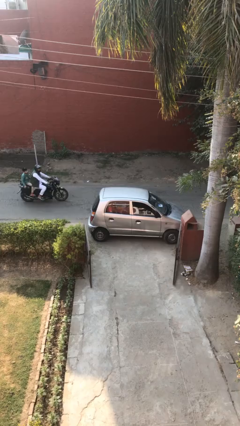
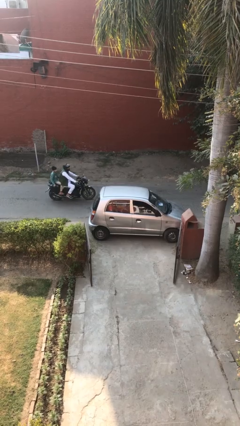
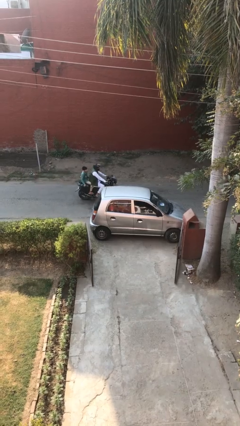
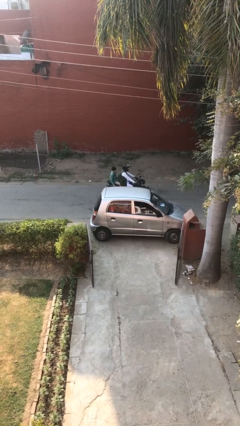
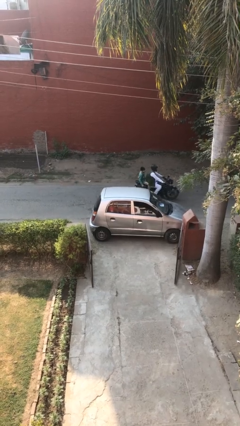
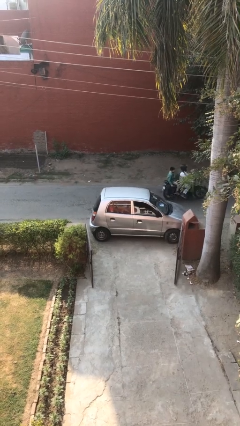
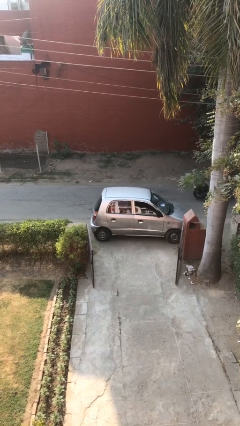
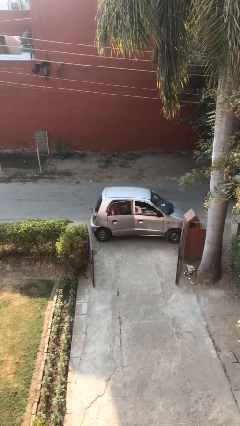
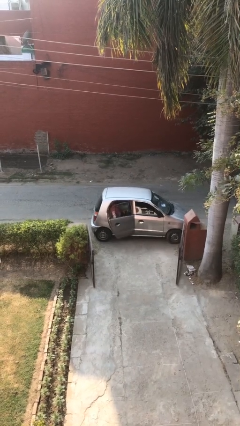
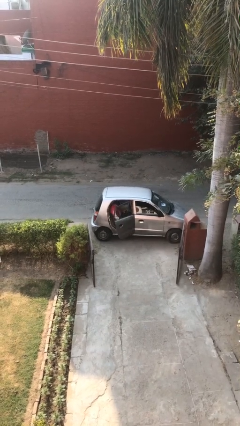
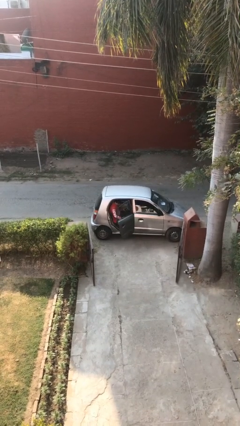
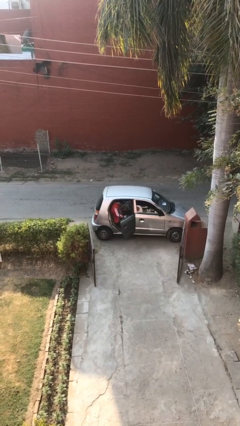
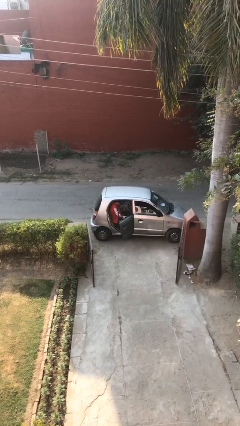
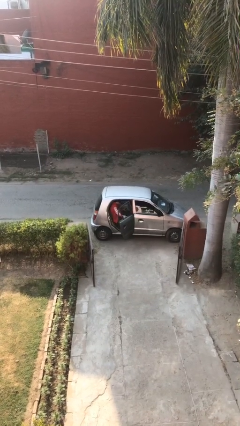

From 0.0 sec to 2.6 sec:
person opens car door

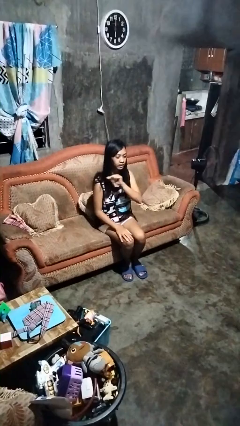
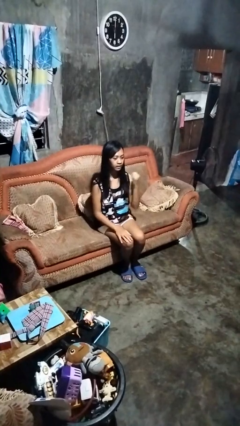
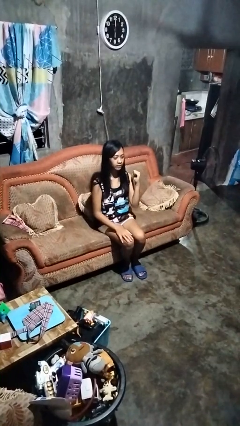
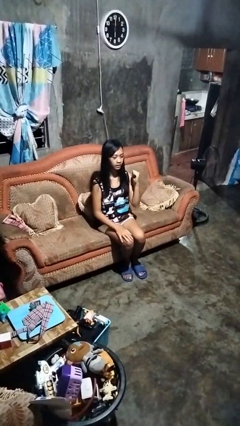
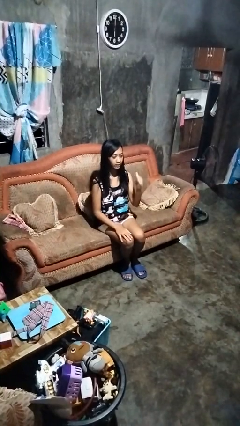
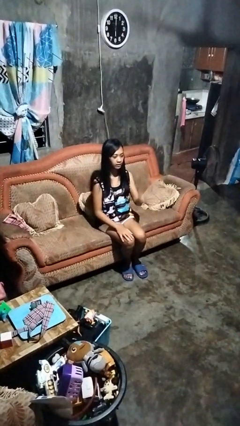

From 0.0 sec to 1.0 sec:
person gestures cut

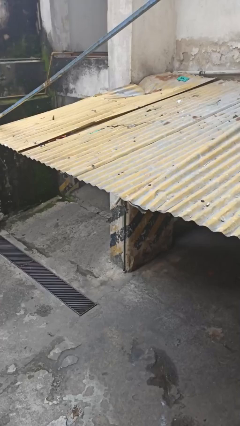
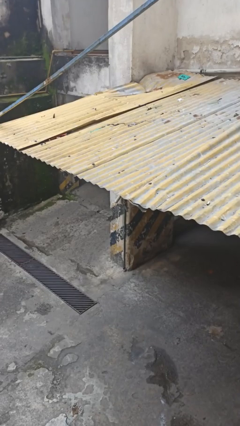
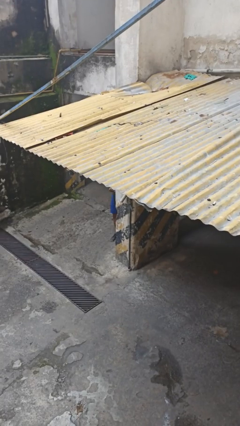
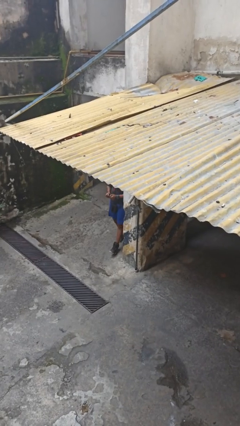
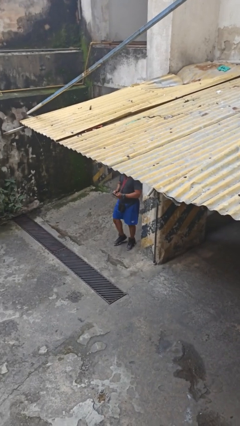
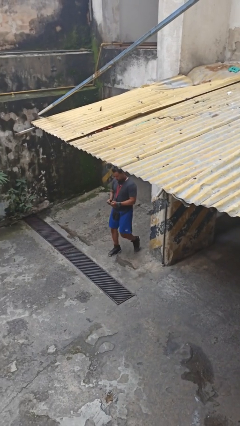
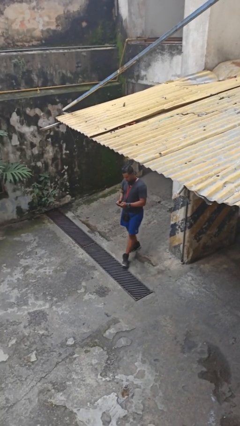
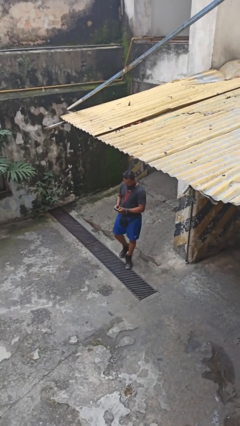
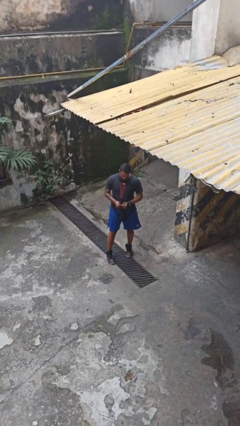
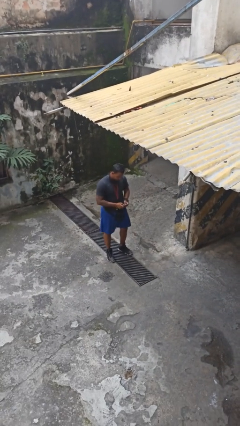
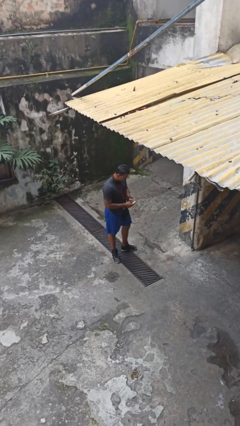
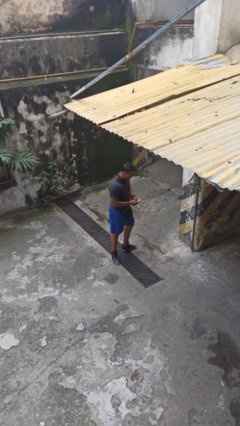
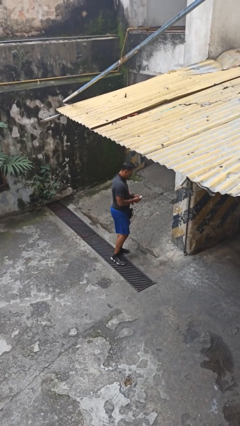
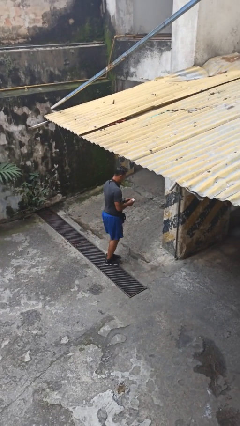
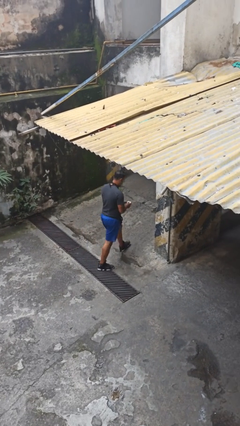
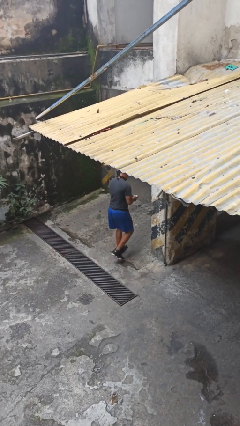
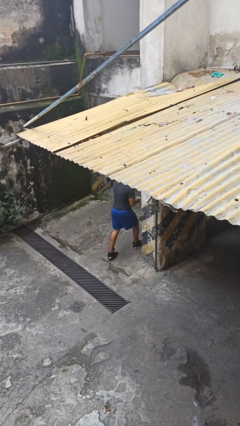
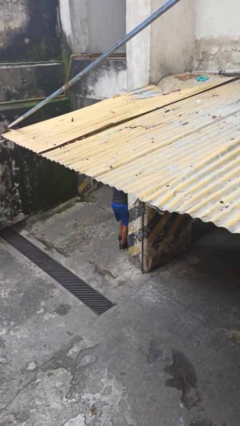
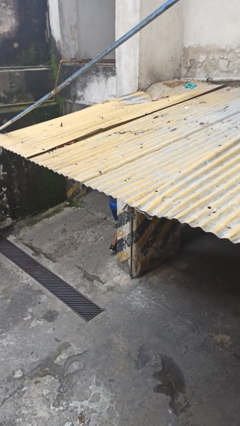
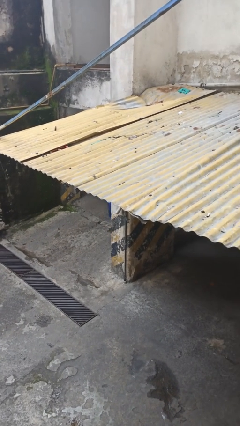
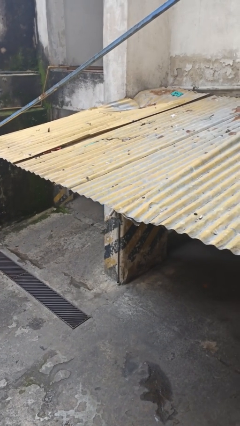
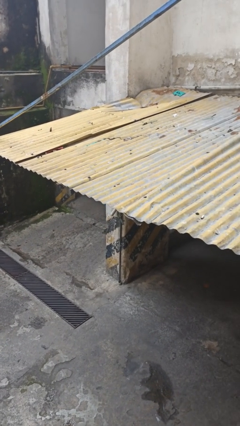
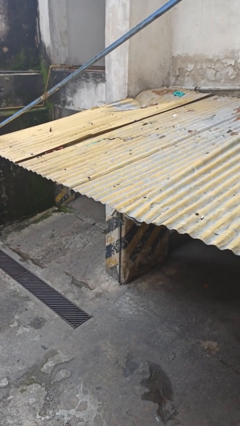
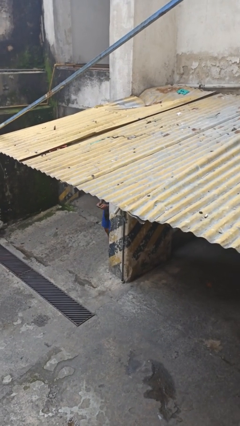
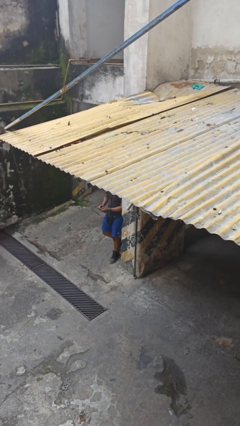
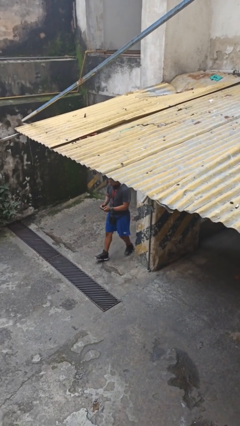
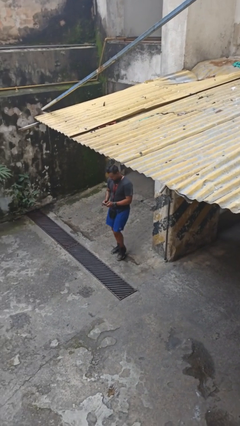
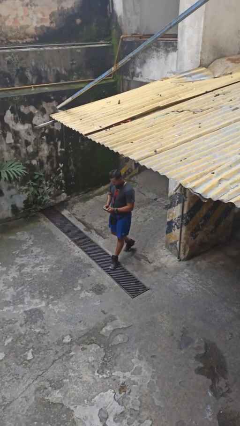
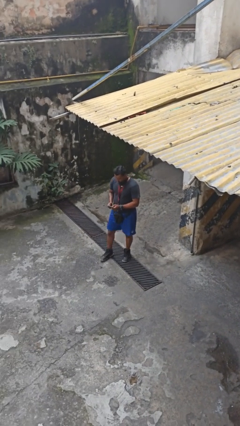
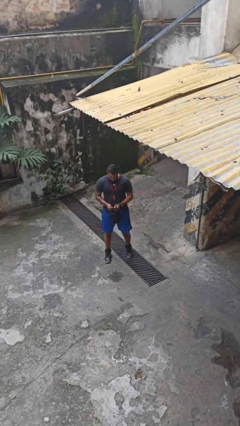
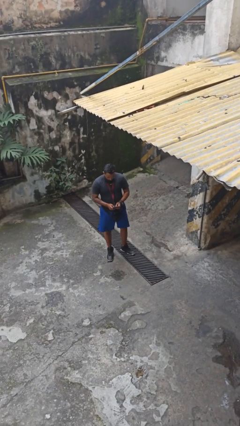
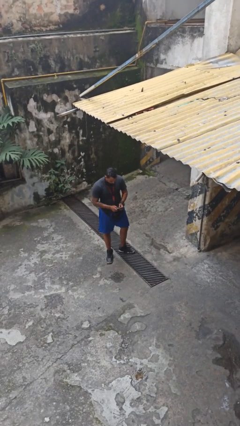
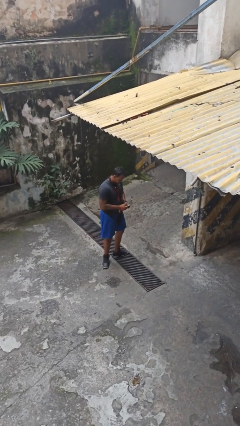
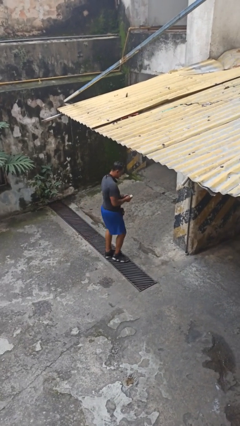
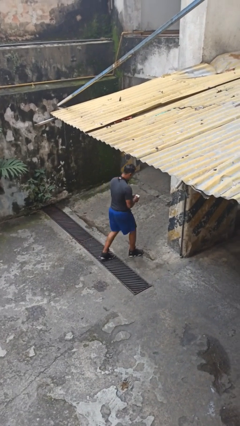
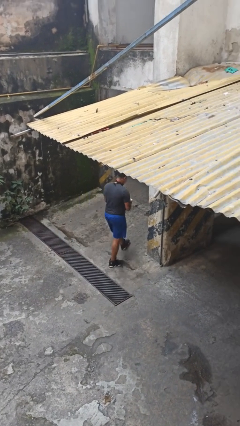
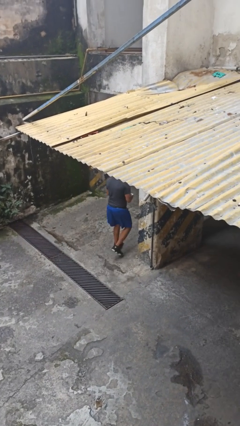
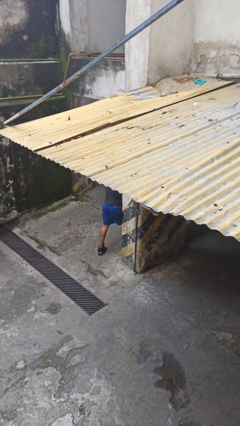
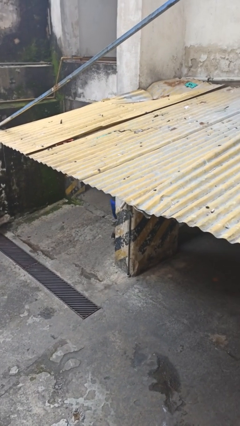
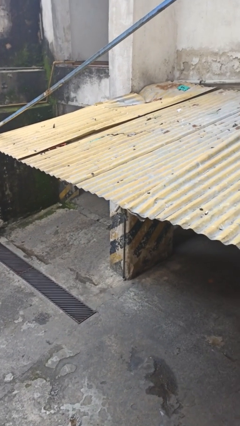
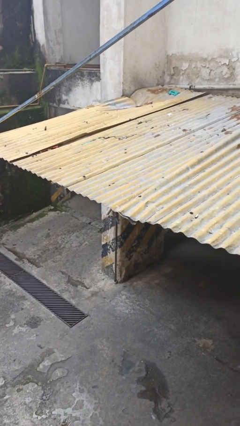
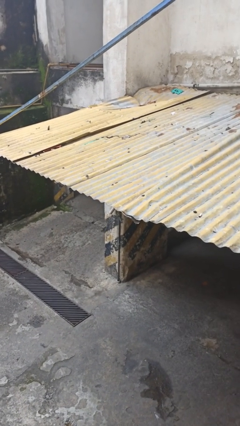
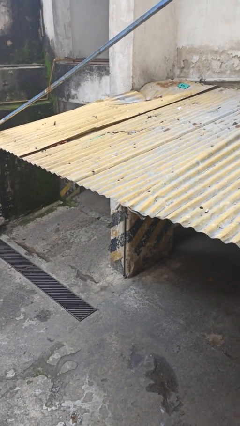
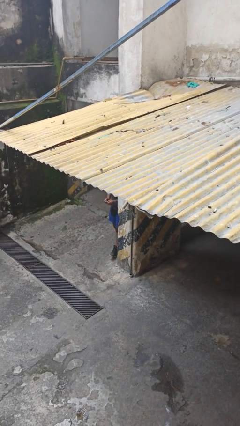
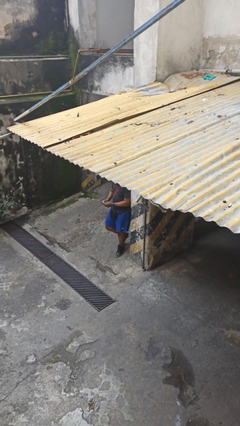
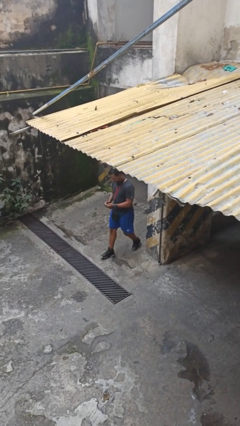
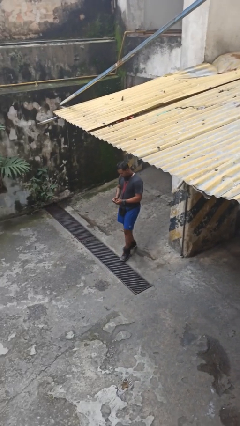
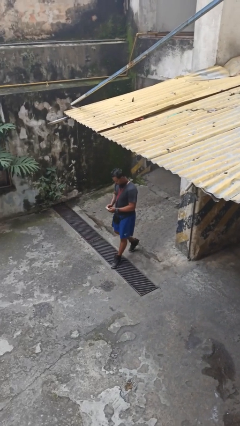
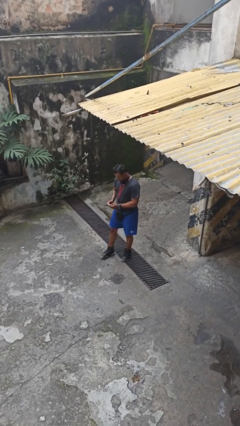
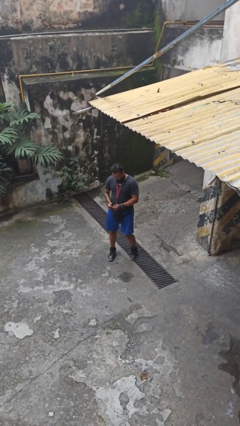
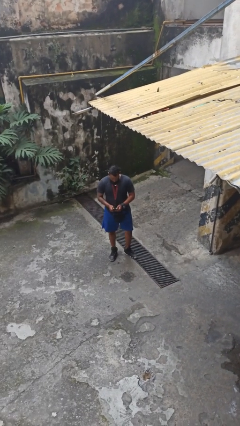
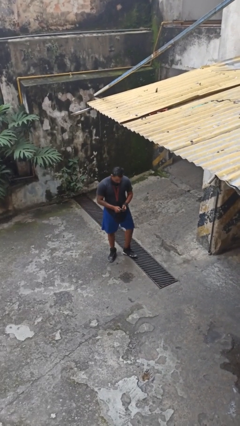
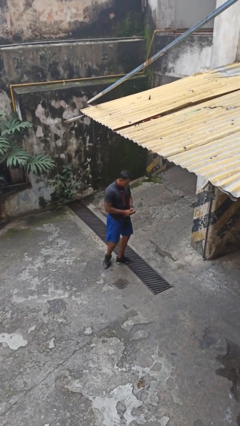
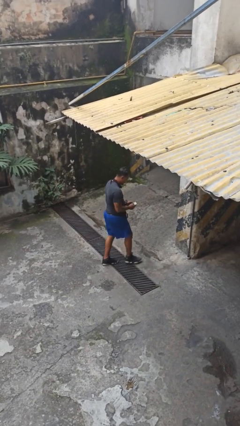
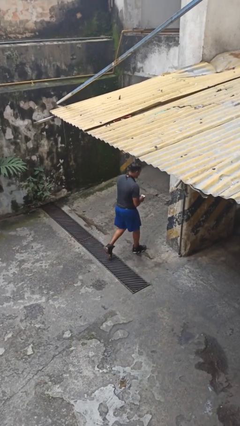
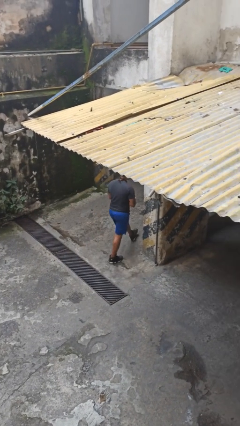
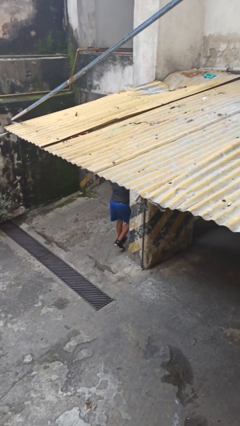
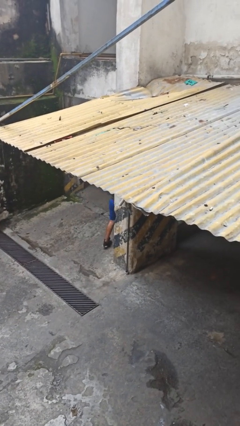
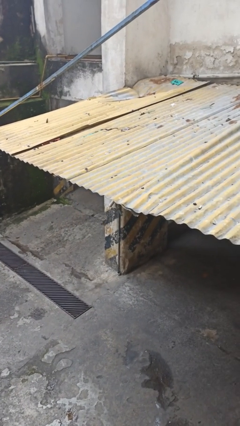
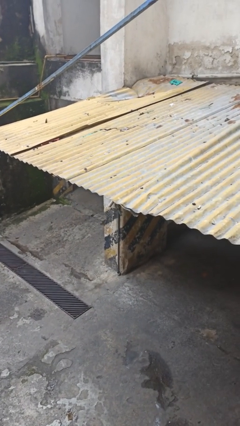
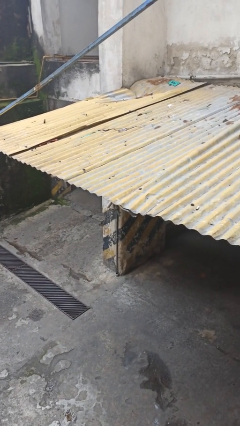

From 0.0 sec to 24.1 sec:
person texts on phone

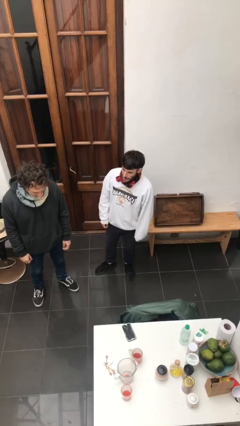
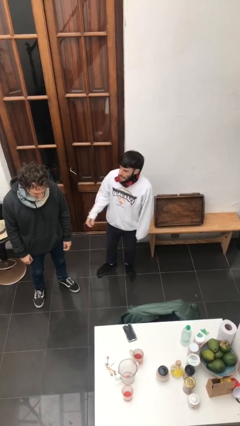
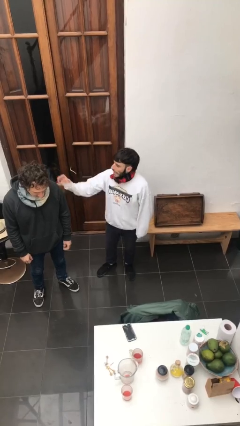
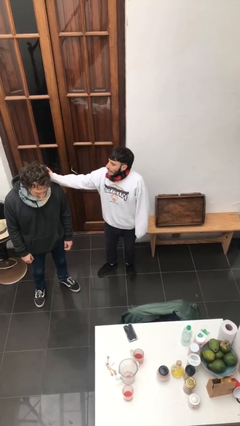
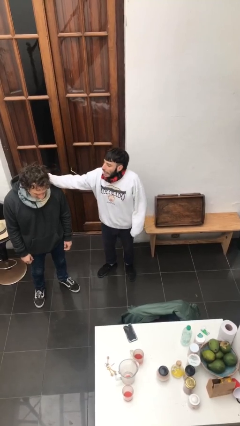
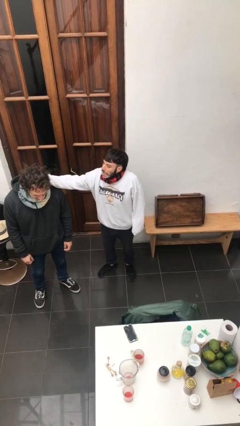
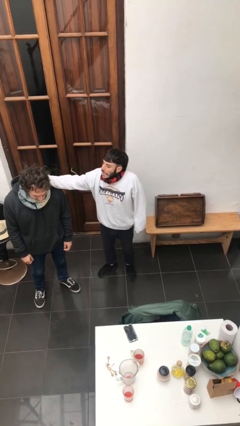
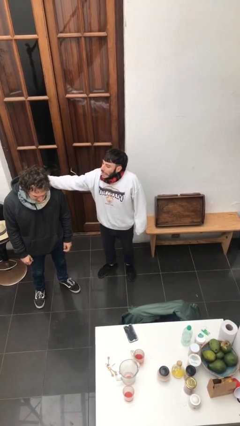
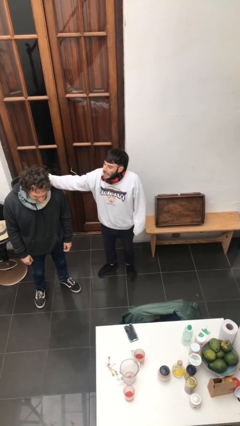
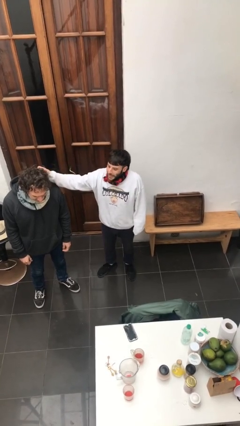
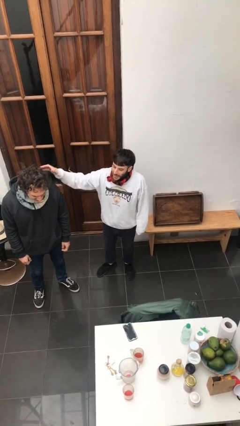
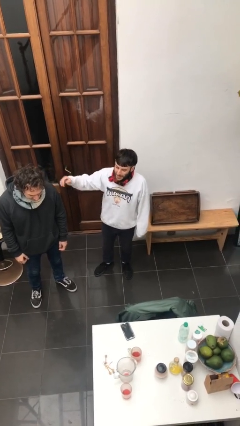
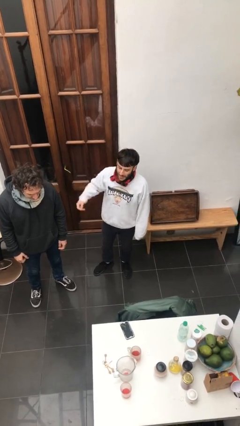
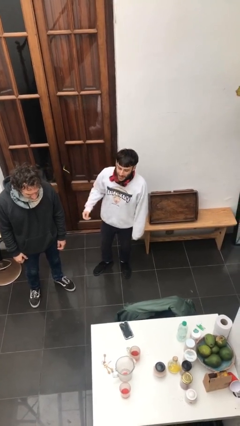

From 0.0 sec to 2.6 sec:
person grabs person by hair
